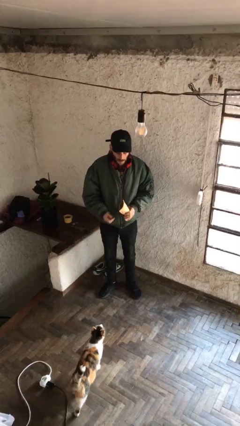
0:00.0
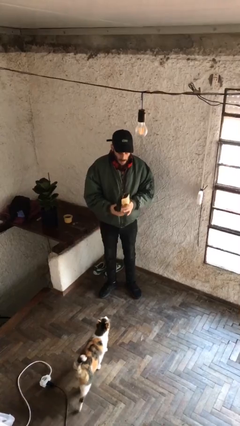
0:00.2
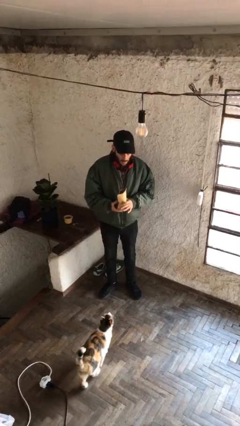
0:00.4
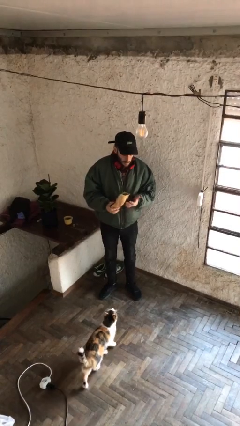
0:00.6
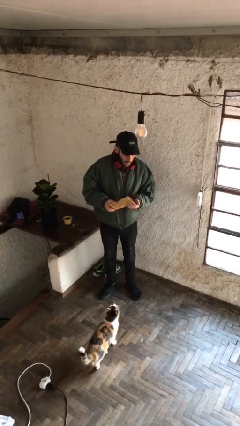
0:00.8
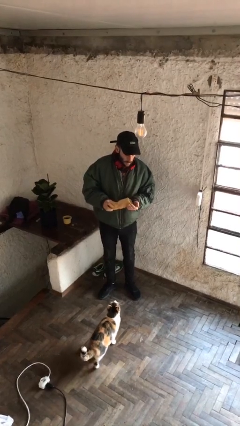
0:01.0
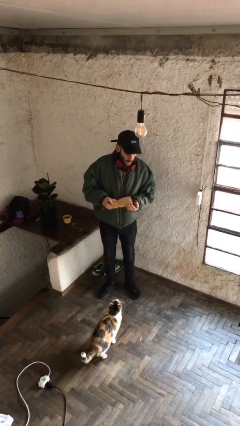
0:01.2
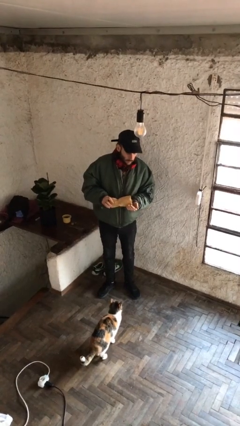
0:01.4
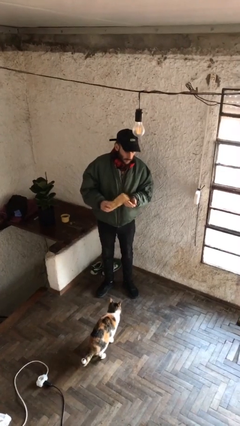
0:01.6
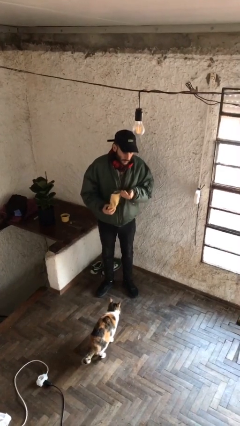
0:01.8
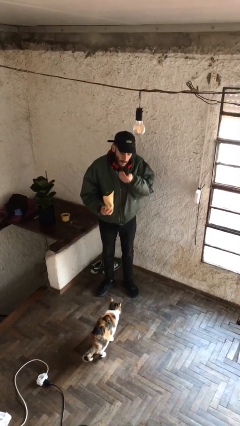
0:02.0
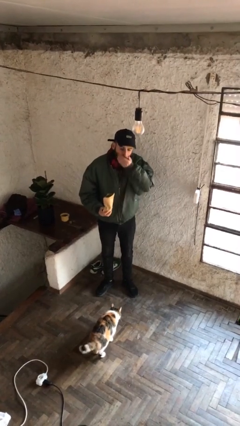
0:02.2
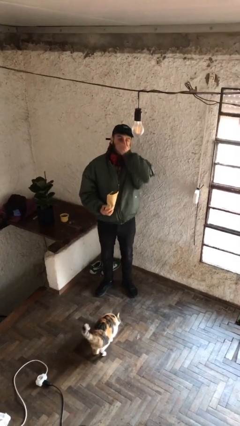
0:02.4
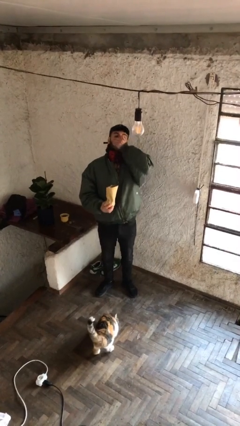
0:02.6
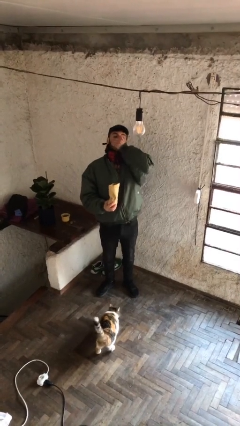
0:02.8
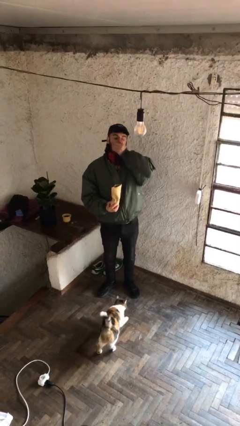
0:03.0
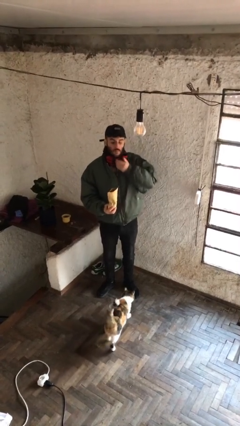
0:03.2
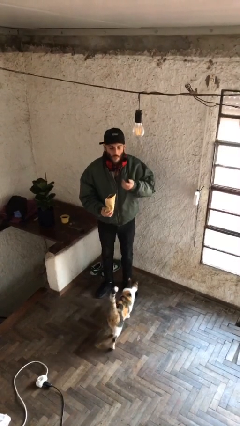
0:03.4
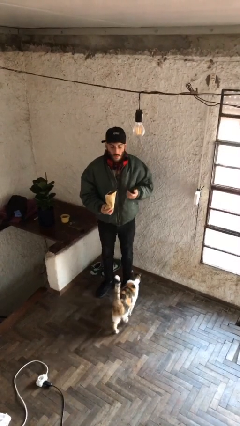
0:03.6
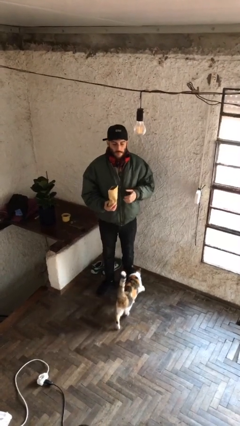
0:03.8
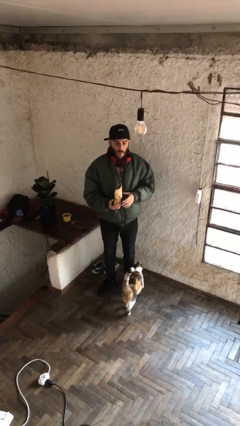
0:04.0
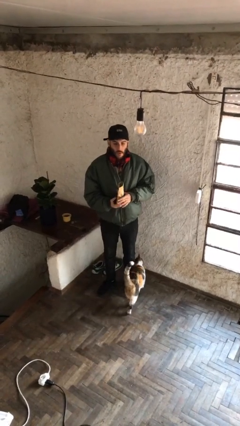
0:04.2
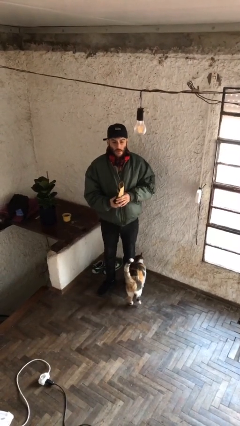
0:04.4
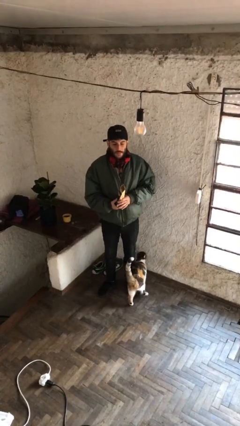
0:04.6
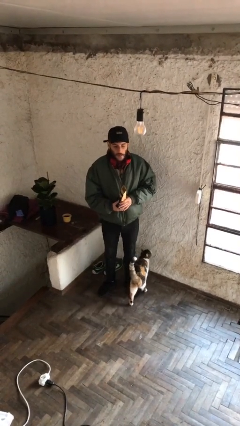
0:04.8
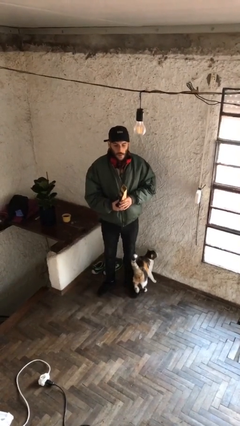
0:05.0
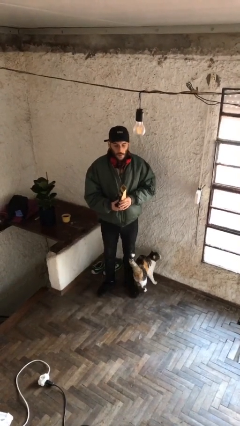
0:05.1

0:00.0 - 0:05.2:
person eats snack from bag

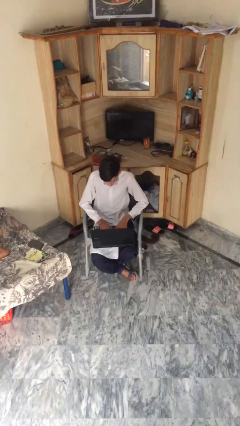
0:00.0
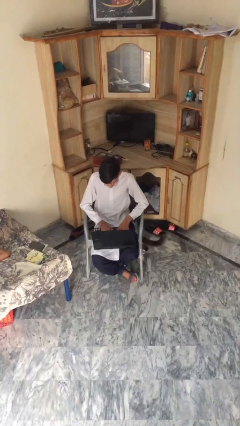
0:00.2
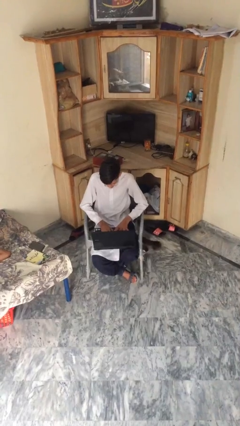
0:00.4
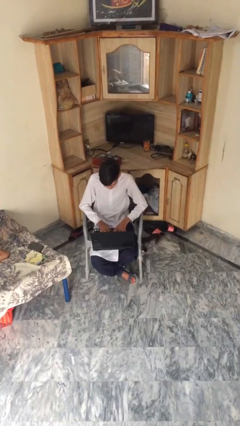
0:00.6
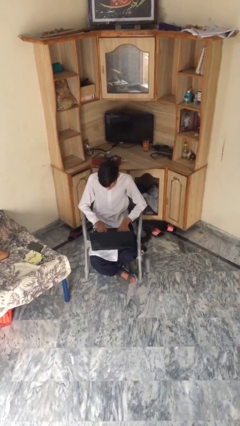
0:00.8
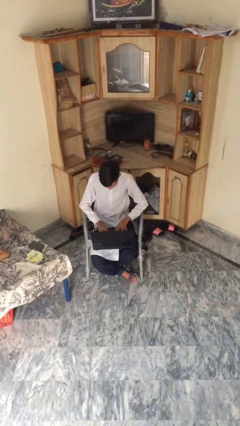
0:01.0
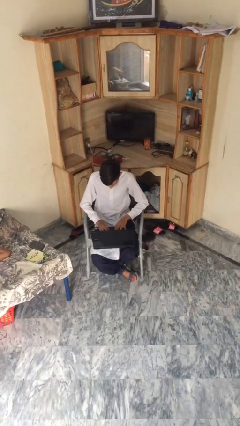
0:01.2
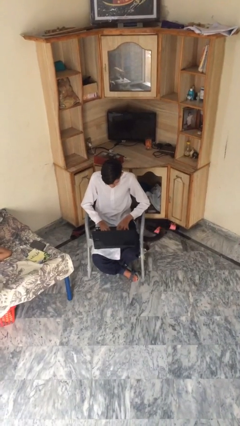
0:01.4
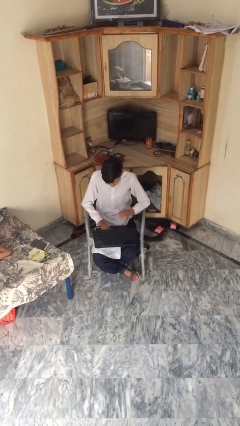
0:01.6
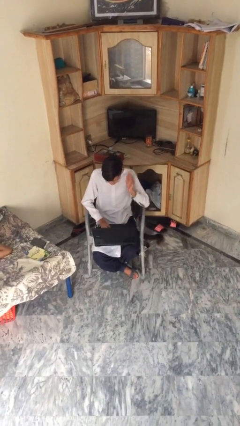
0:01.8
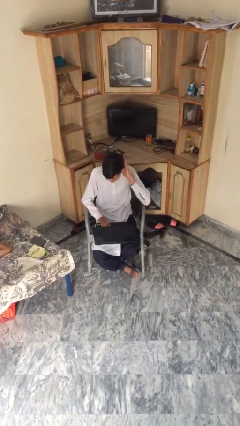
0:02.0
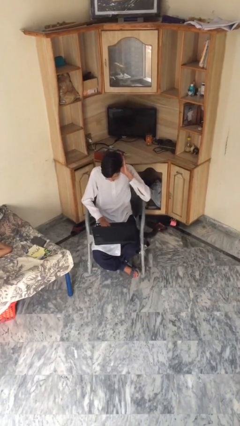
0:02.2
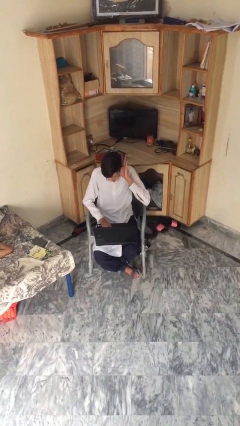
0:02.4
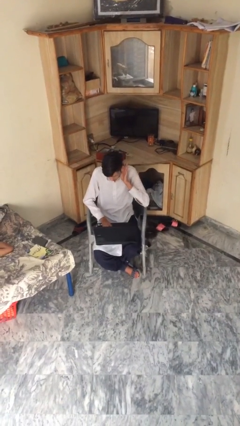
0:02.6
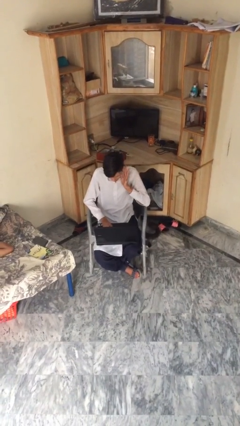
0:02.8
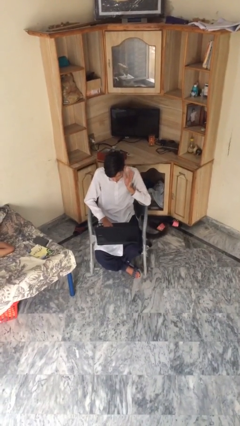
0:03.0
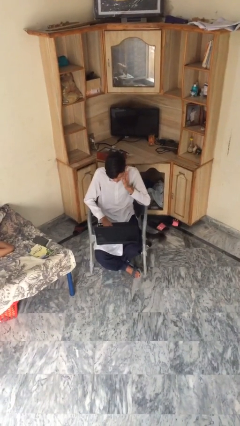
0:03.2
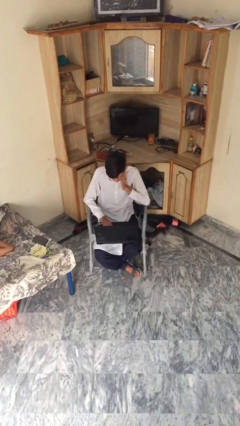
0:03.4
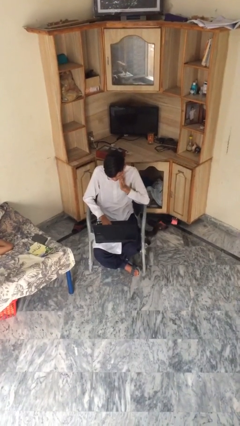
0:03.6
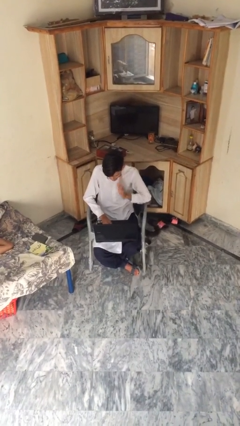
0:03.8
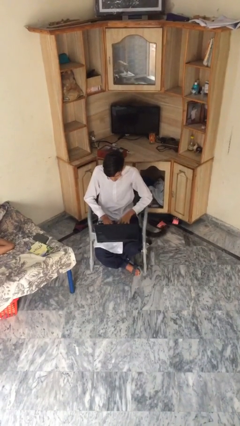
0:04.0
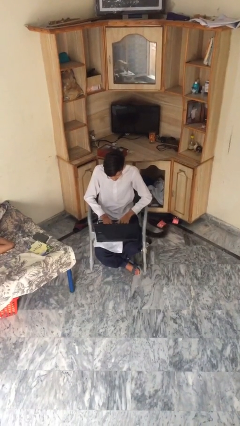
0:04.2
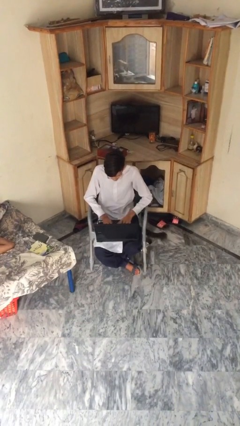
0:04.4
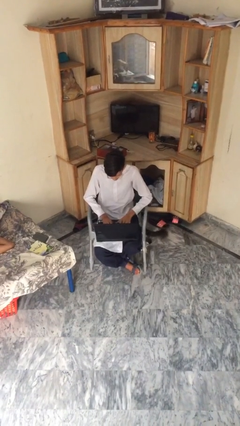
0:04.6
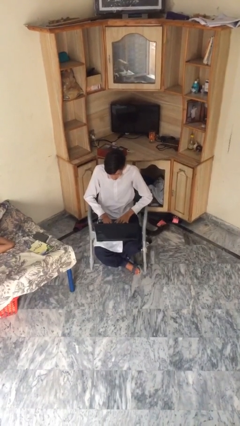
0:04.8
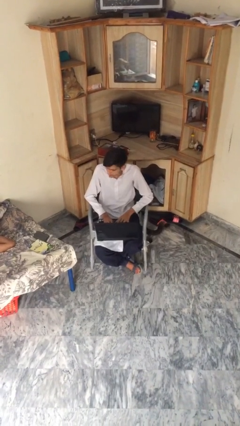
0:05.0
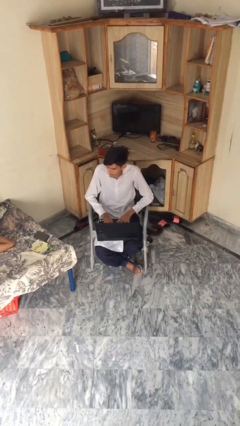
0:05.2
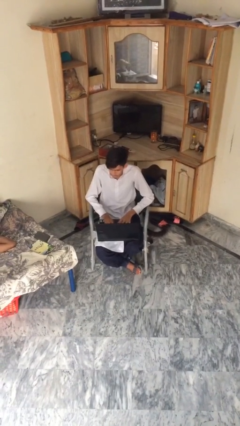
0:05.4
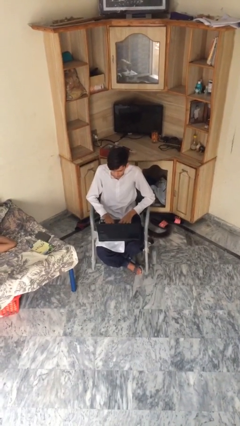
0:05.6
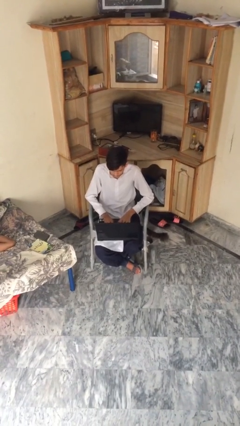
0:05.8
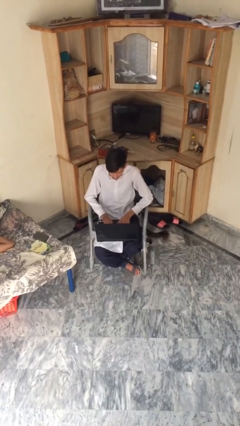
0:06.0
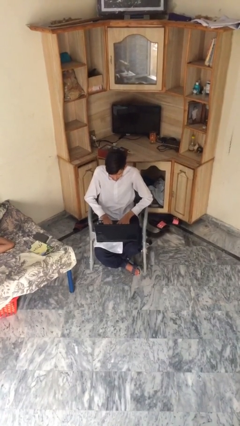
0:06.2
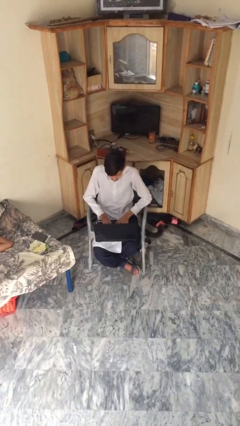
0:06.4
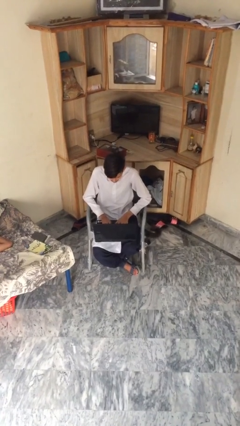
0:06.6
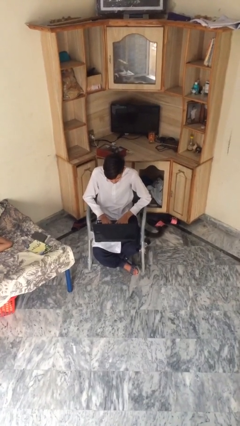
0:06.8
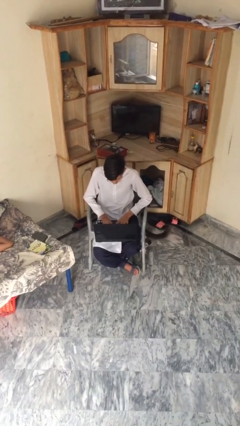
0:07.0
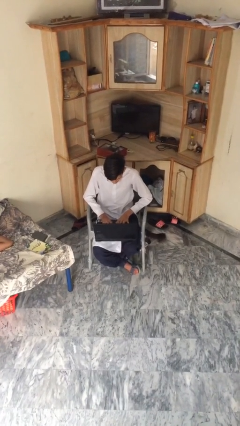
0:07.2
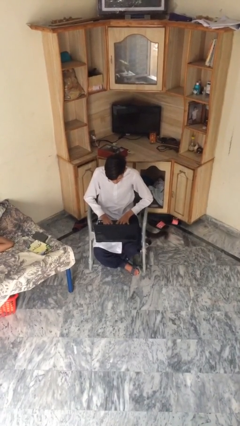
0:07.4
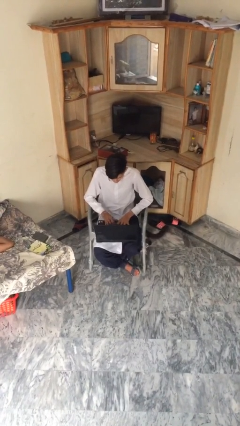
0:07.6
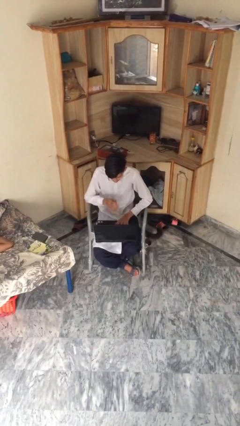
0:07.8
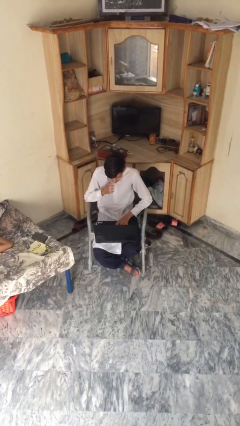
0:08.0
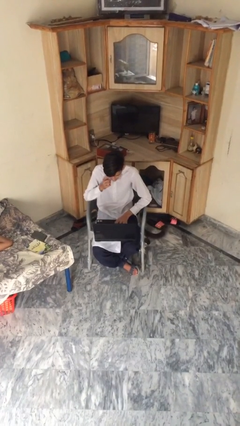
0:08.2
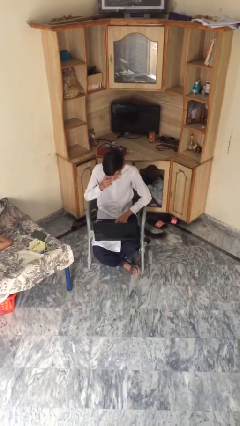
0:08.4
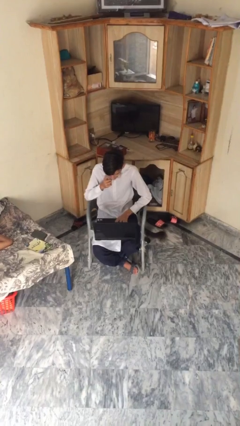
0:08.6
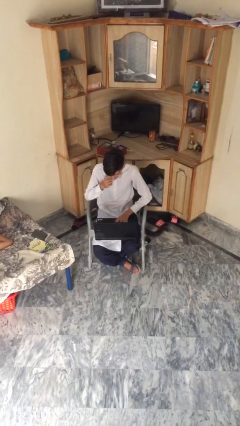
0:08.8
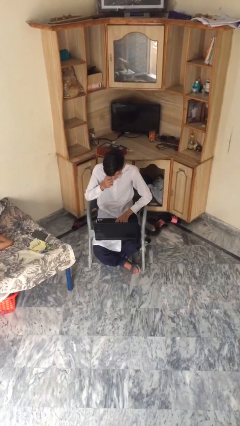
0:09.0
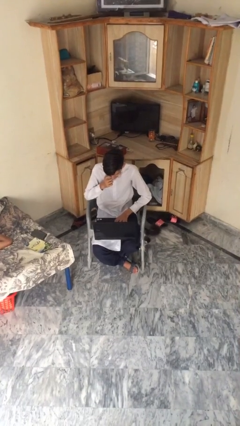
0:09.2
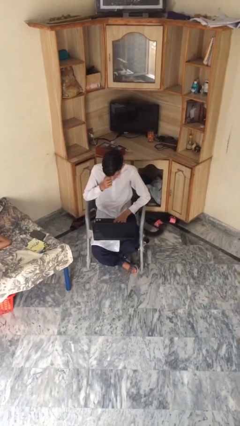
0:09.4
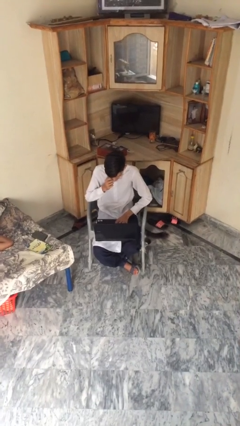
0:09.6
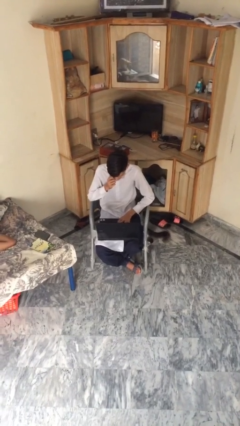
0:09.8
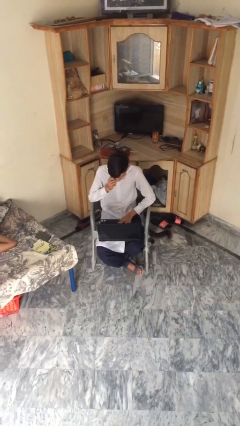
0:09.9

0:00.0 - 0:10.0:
person interacts with laptop

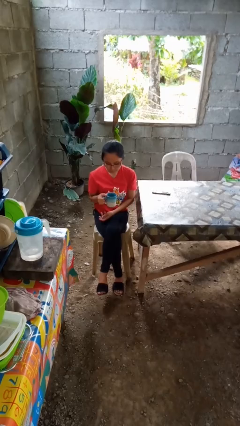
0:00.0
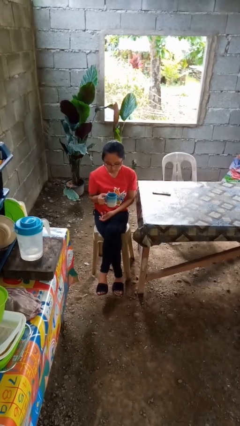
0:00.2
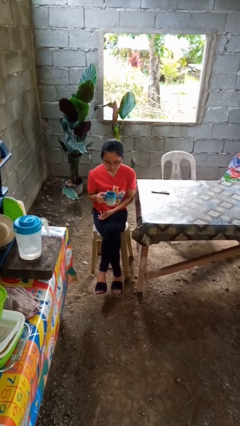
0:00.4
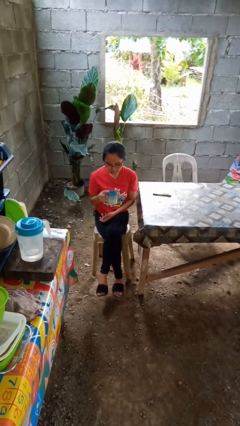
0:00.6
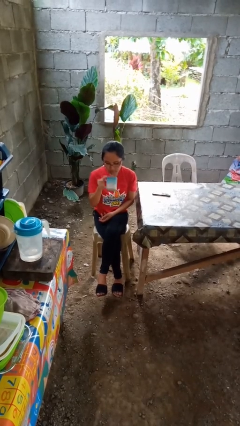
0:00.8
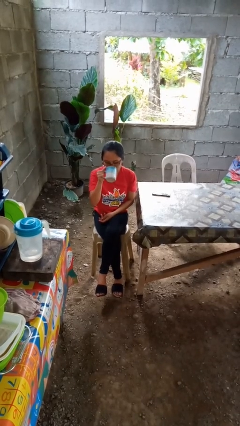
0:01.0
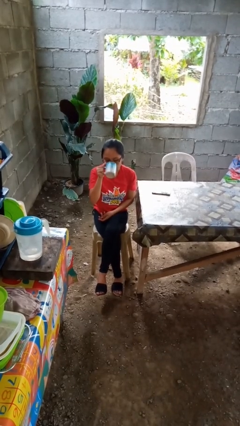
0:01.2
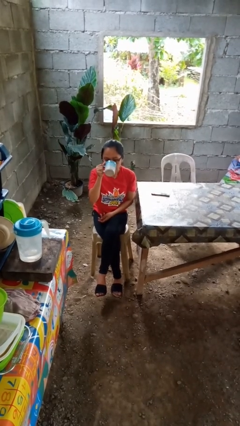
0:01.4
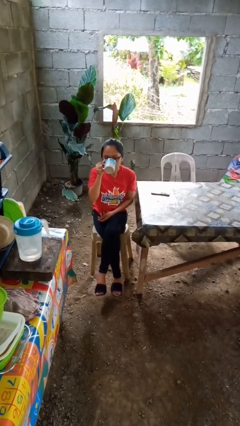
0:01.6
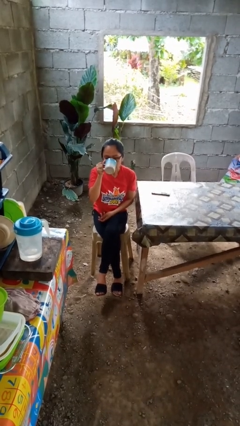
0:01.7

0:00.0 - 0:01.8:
person drinks from mug

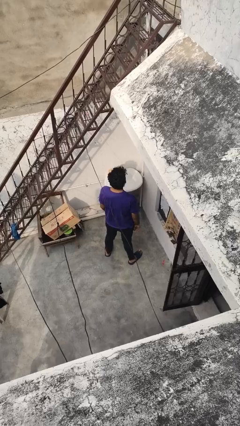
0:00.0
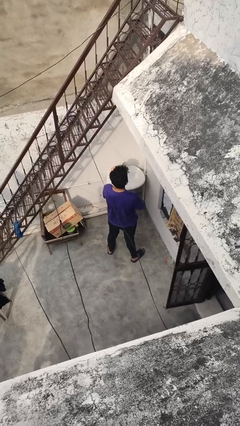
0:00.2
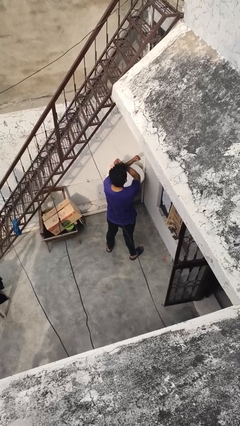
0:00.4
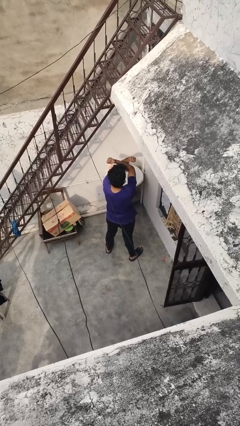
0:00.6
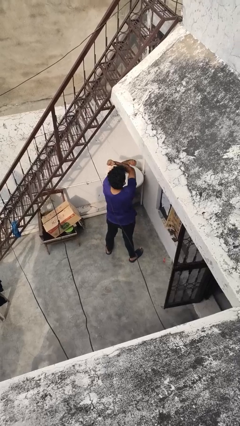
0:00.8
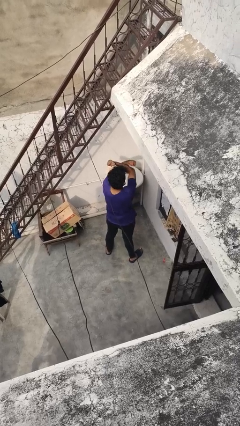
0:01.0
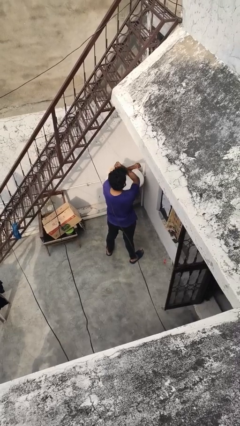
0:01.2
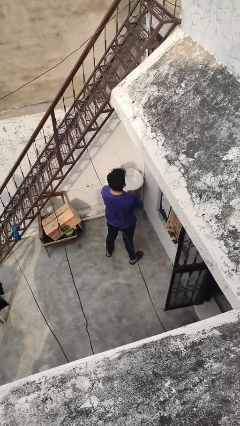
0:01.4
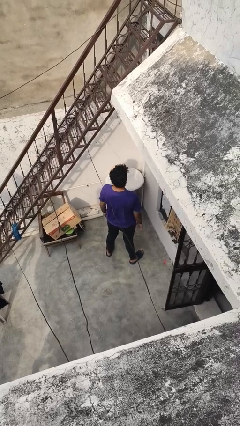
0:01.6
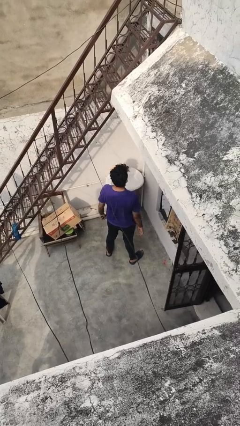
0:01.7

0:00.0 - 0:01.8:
person gestures arms x
